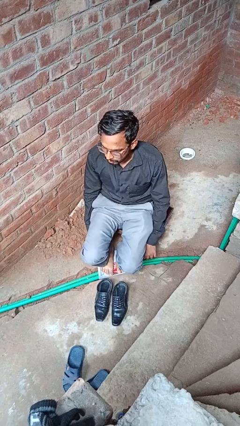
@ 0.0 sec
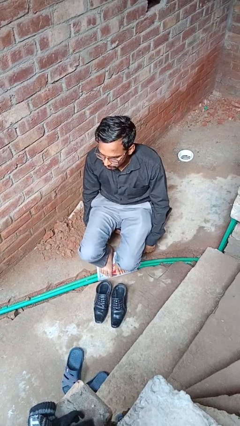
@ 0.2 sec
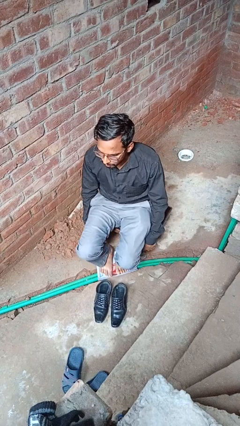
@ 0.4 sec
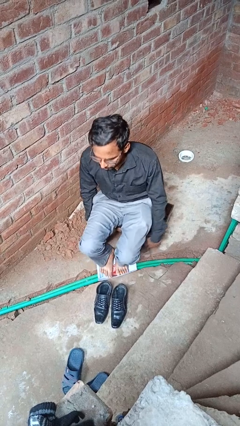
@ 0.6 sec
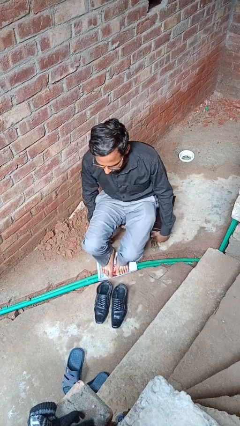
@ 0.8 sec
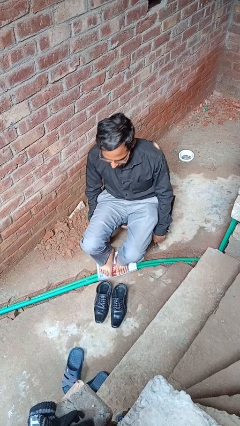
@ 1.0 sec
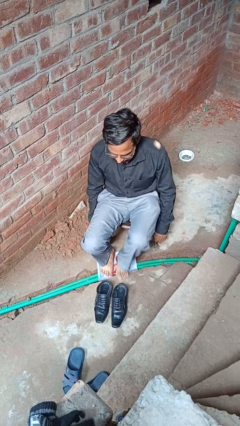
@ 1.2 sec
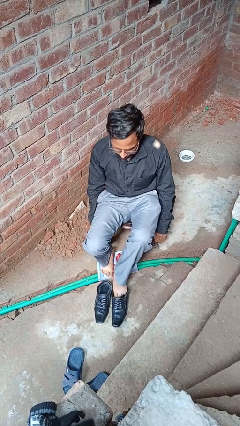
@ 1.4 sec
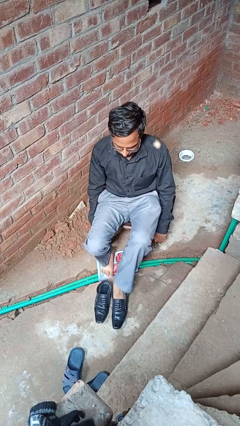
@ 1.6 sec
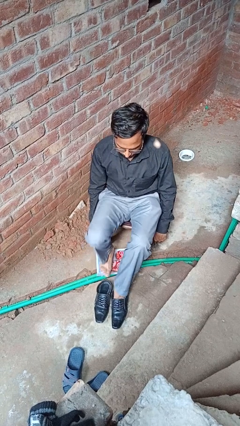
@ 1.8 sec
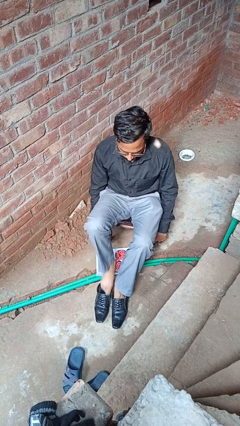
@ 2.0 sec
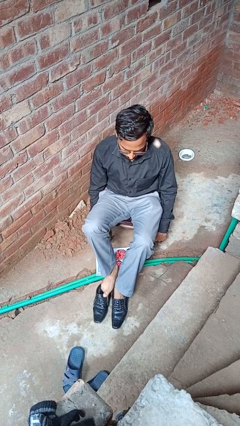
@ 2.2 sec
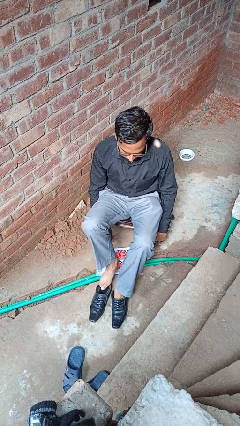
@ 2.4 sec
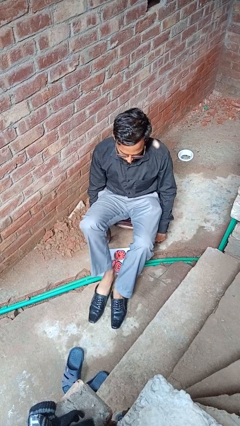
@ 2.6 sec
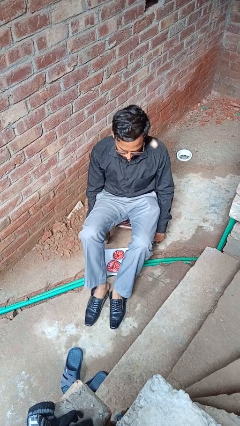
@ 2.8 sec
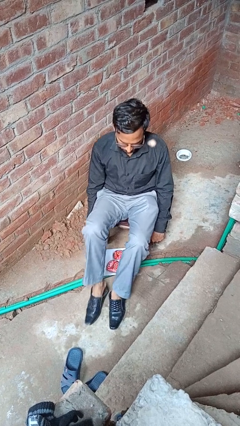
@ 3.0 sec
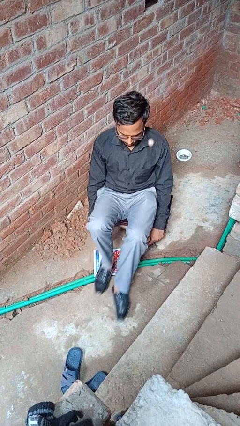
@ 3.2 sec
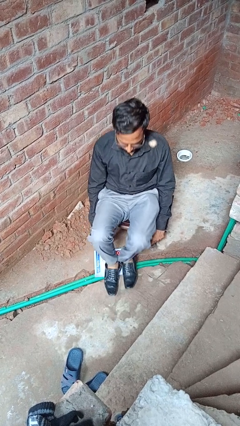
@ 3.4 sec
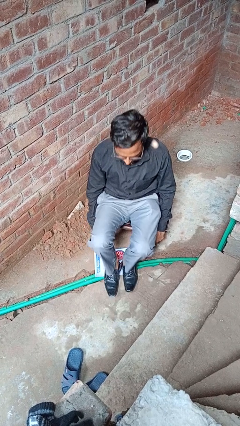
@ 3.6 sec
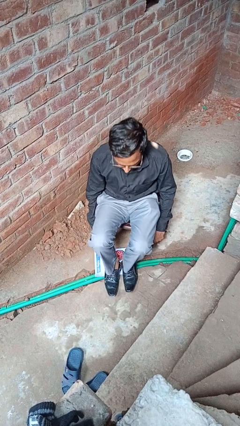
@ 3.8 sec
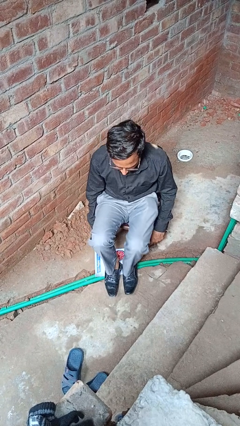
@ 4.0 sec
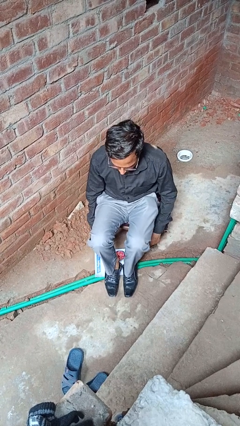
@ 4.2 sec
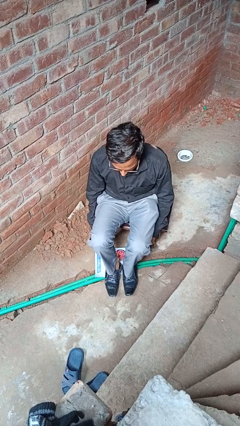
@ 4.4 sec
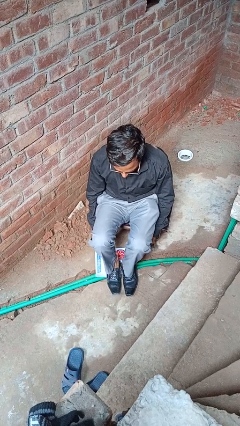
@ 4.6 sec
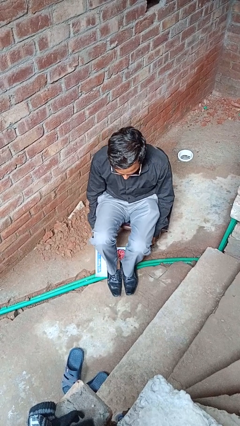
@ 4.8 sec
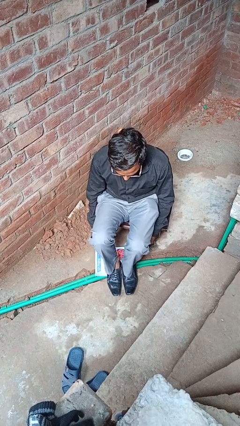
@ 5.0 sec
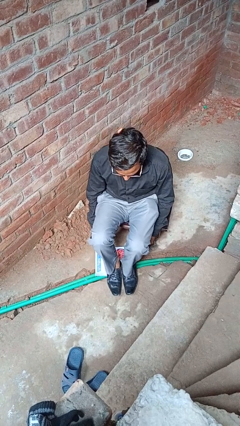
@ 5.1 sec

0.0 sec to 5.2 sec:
person puts on shoes

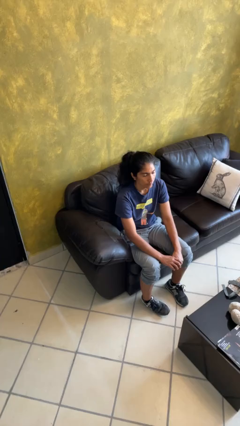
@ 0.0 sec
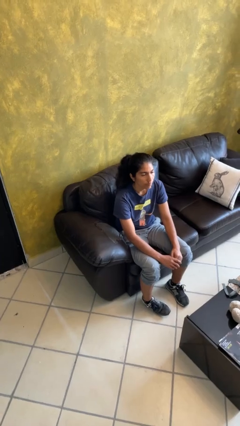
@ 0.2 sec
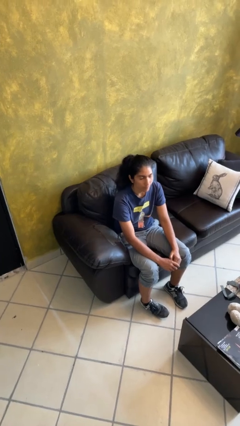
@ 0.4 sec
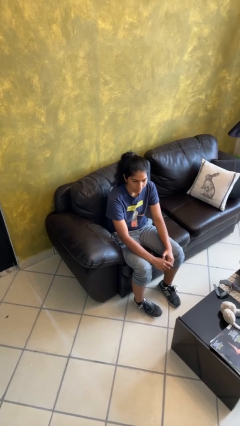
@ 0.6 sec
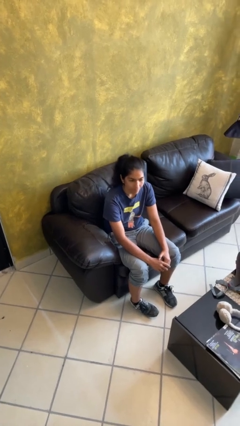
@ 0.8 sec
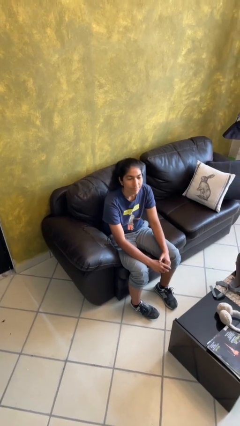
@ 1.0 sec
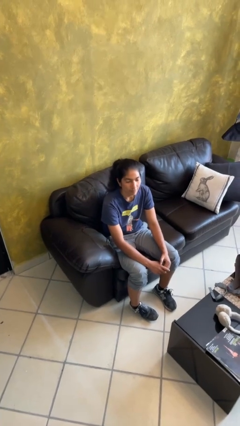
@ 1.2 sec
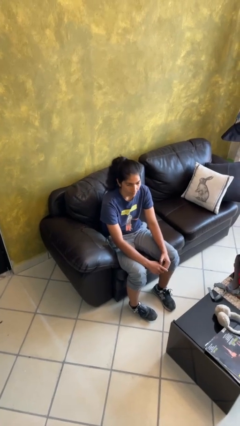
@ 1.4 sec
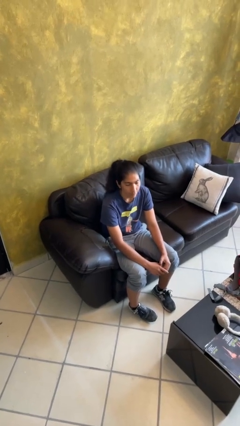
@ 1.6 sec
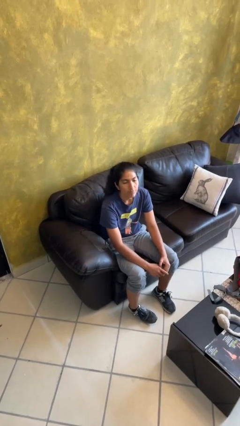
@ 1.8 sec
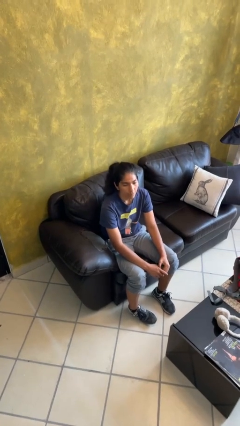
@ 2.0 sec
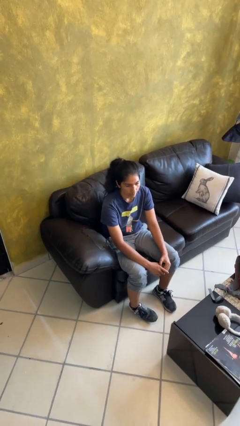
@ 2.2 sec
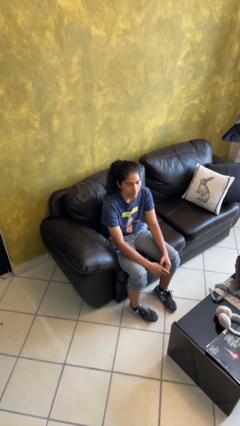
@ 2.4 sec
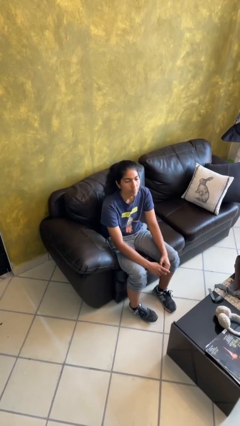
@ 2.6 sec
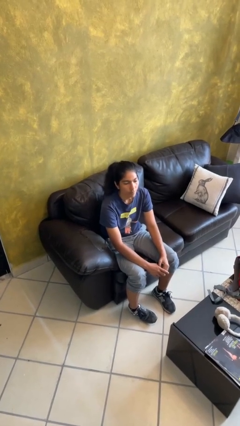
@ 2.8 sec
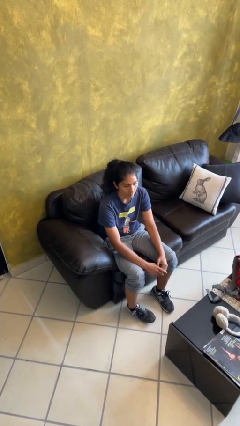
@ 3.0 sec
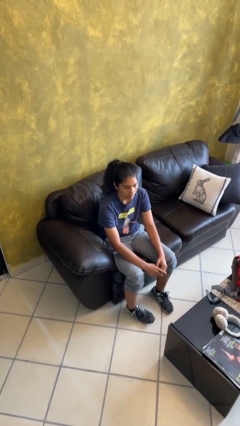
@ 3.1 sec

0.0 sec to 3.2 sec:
person nods head

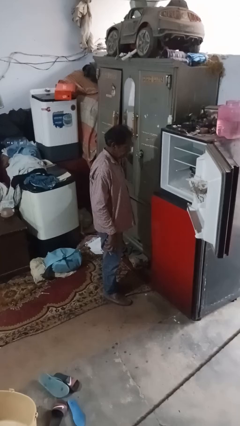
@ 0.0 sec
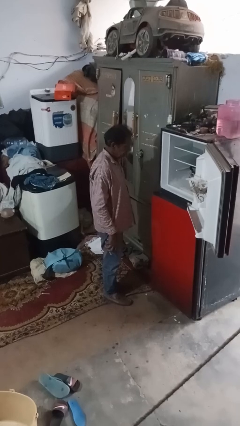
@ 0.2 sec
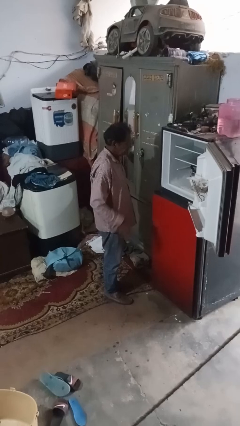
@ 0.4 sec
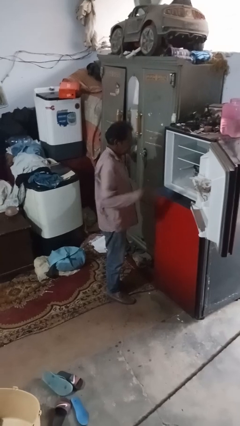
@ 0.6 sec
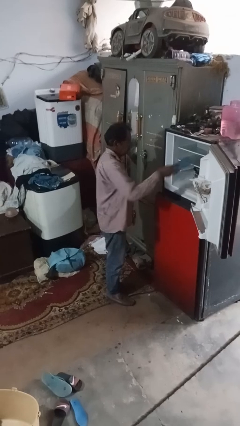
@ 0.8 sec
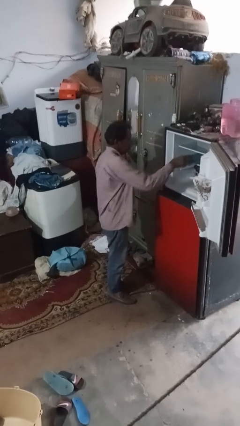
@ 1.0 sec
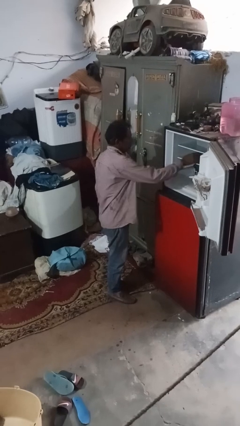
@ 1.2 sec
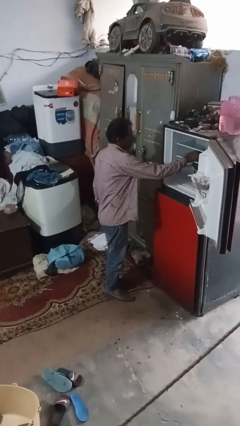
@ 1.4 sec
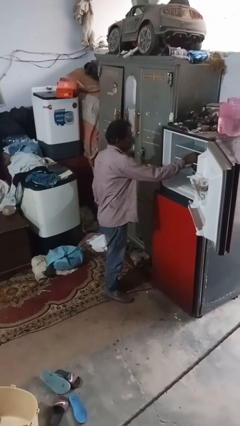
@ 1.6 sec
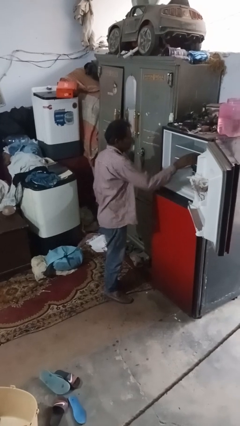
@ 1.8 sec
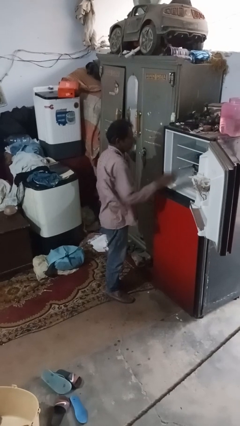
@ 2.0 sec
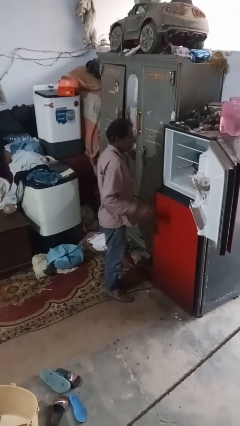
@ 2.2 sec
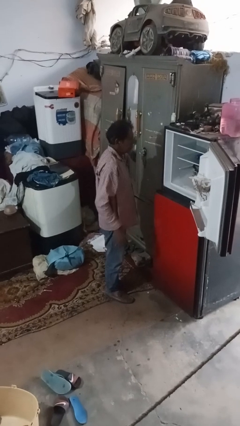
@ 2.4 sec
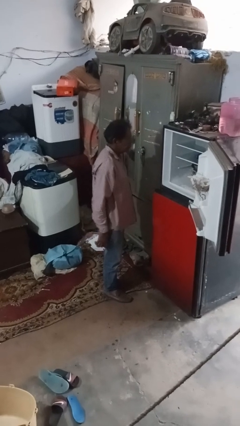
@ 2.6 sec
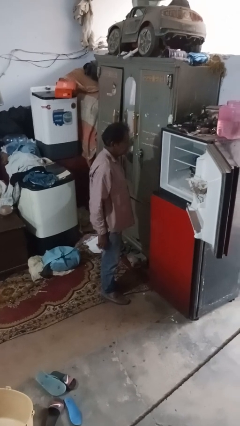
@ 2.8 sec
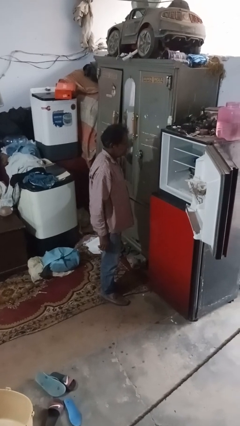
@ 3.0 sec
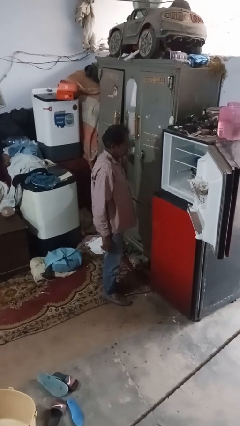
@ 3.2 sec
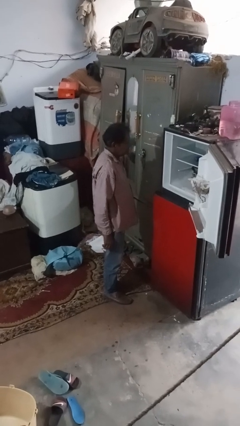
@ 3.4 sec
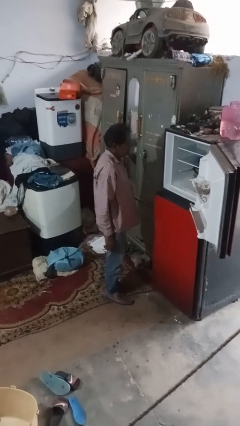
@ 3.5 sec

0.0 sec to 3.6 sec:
person puts object into refrigerator

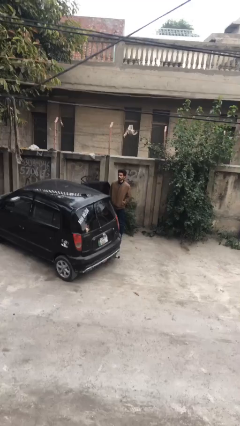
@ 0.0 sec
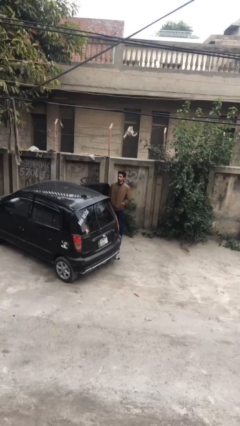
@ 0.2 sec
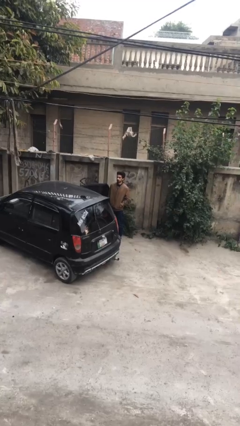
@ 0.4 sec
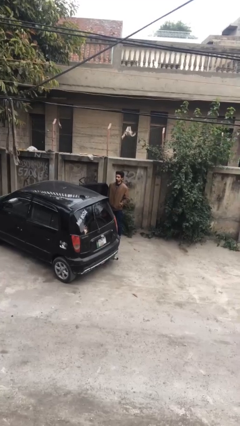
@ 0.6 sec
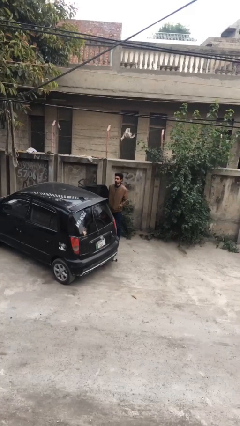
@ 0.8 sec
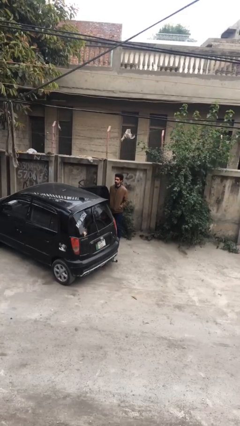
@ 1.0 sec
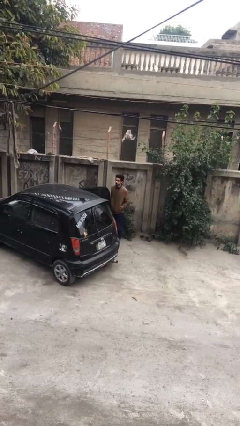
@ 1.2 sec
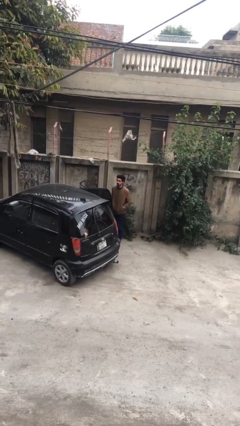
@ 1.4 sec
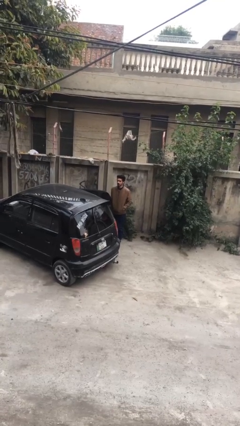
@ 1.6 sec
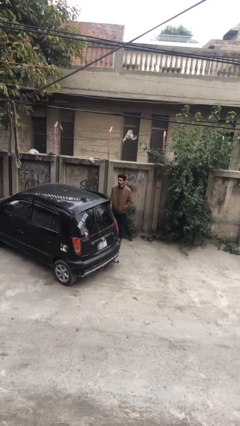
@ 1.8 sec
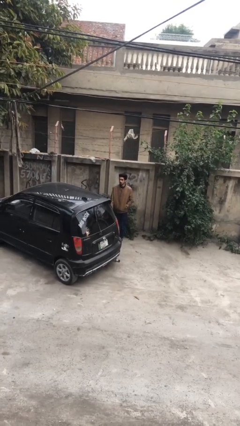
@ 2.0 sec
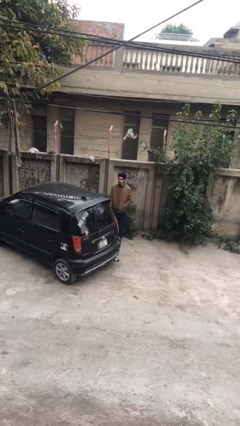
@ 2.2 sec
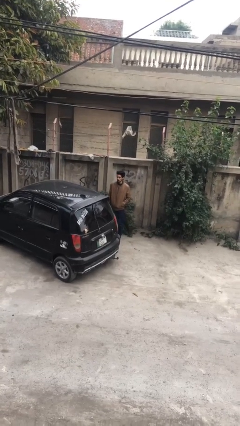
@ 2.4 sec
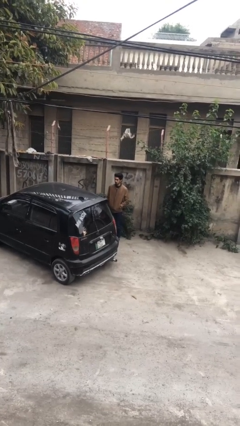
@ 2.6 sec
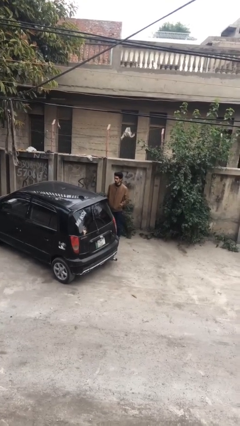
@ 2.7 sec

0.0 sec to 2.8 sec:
person closes car door

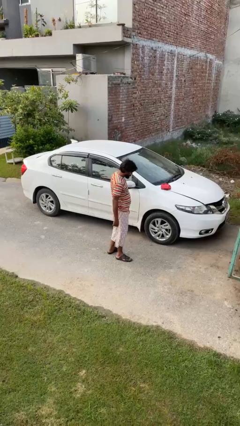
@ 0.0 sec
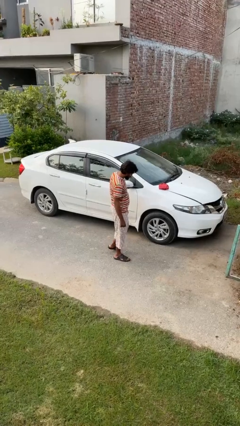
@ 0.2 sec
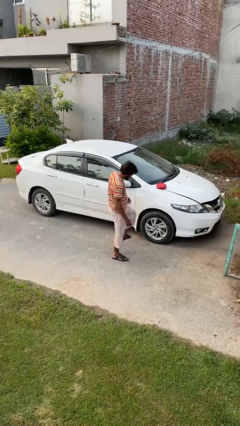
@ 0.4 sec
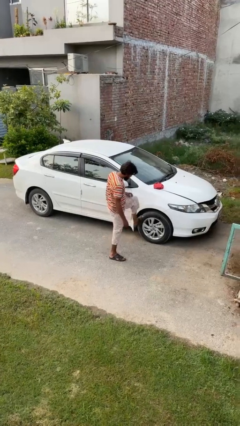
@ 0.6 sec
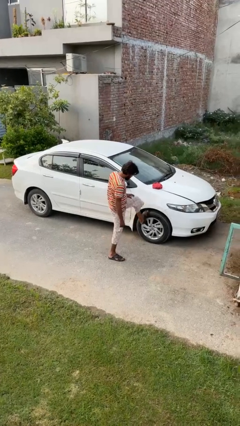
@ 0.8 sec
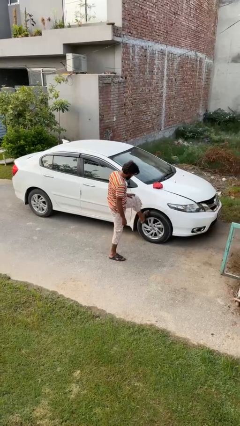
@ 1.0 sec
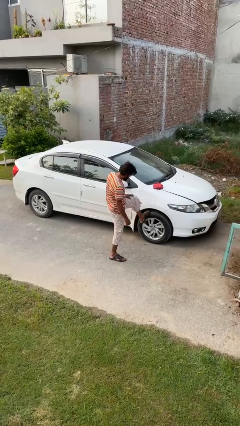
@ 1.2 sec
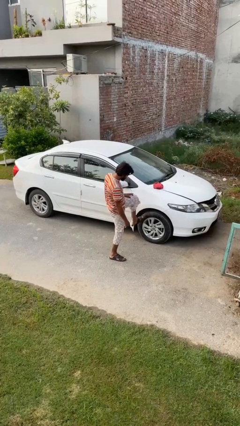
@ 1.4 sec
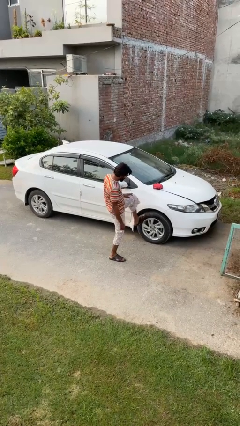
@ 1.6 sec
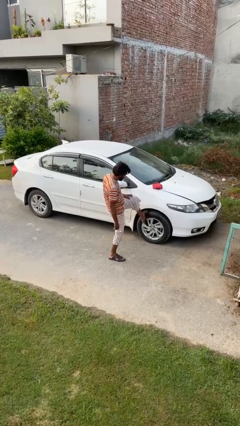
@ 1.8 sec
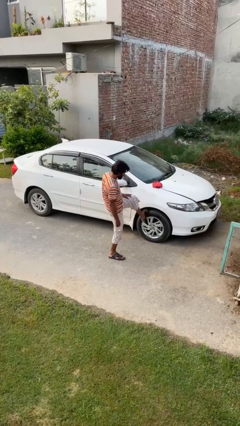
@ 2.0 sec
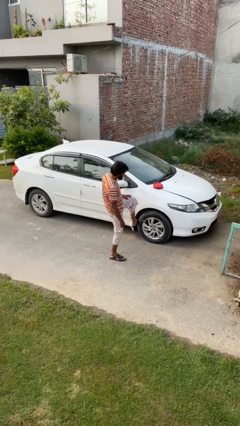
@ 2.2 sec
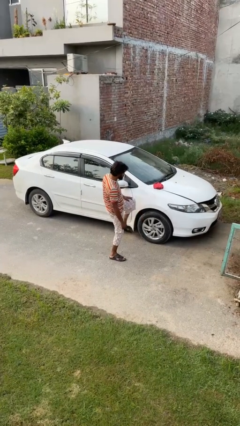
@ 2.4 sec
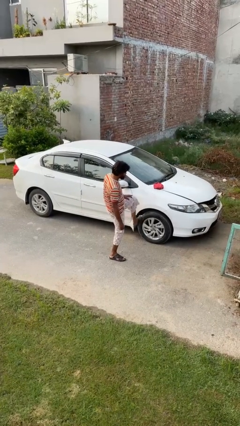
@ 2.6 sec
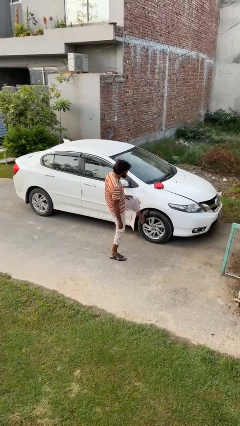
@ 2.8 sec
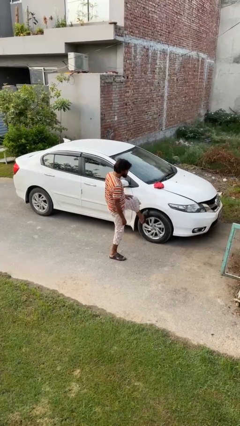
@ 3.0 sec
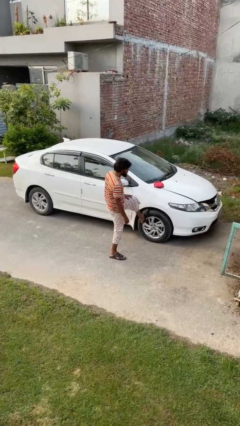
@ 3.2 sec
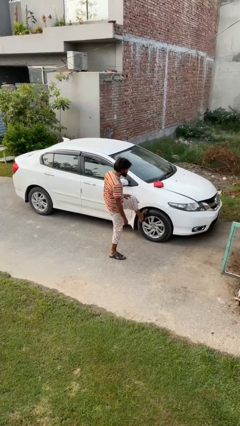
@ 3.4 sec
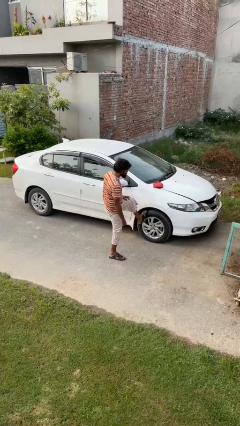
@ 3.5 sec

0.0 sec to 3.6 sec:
person kicks car tires
